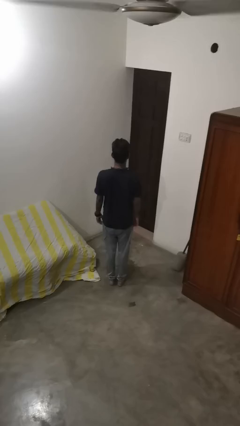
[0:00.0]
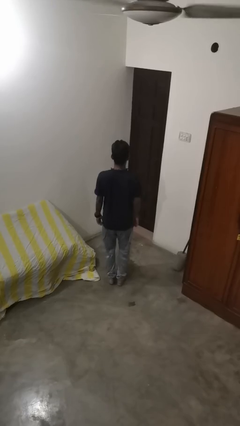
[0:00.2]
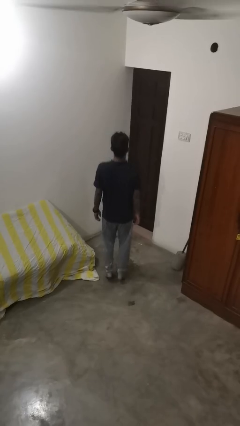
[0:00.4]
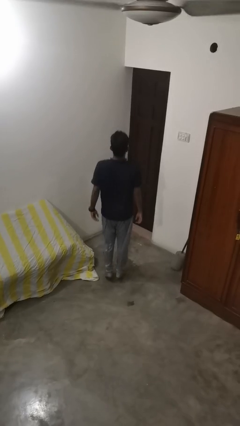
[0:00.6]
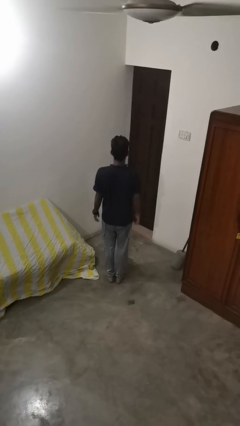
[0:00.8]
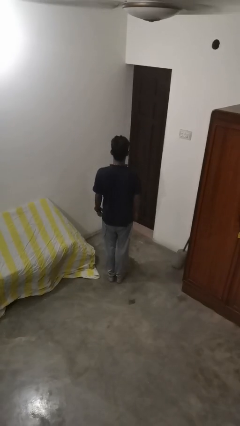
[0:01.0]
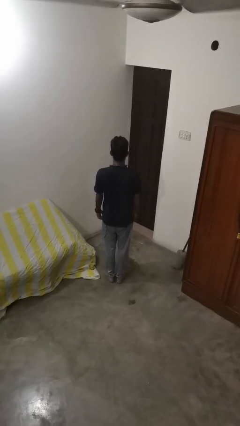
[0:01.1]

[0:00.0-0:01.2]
person jumps

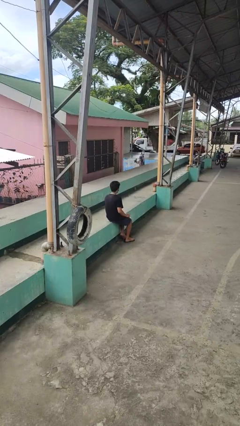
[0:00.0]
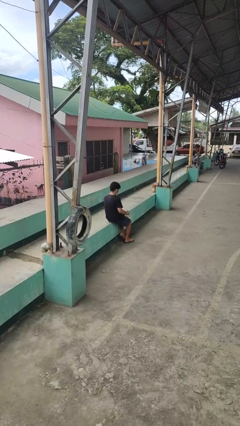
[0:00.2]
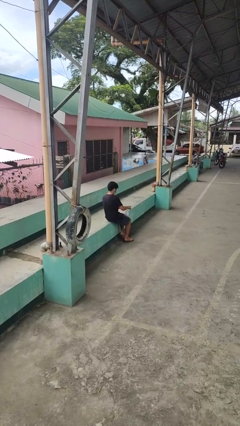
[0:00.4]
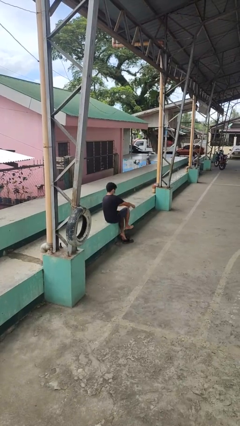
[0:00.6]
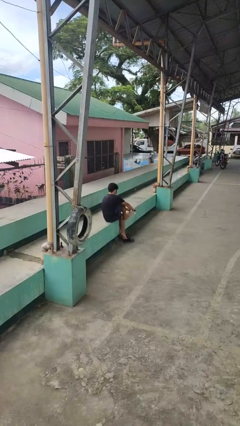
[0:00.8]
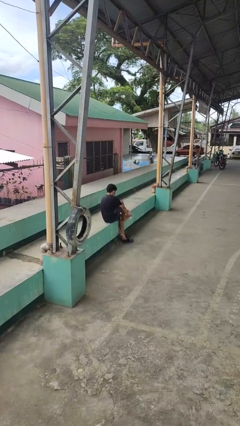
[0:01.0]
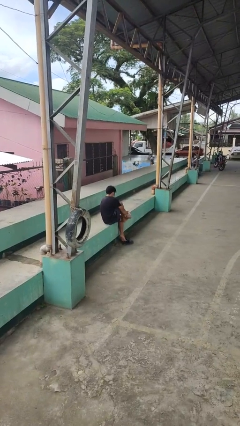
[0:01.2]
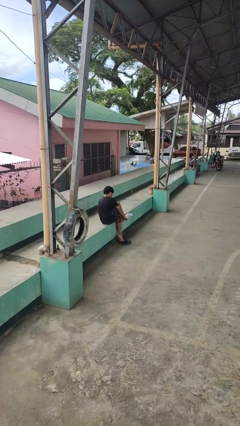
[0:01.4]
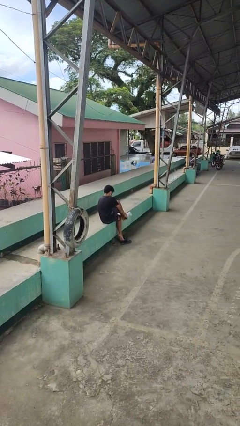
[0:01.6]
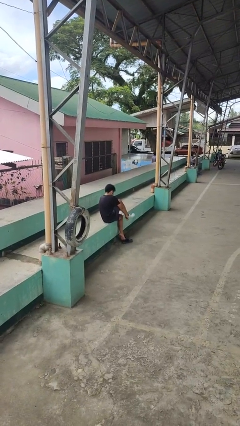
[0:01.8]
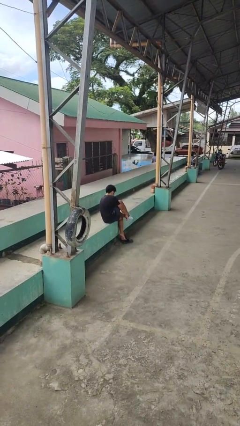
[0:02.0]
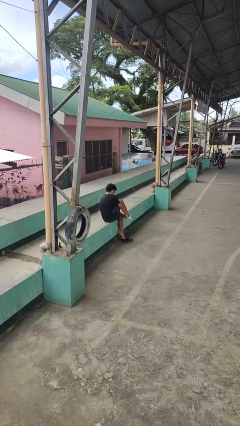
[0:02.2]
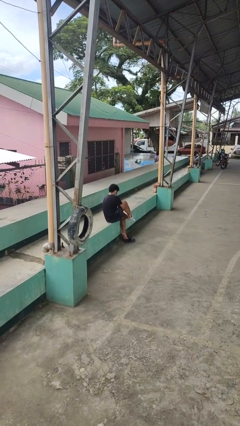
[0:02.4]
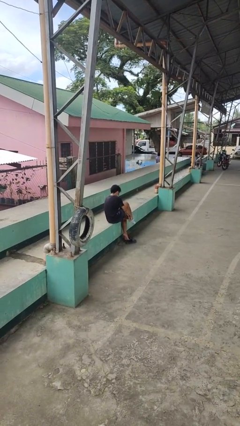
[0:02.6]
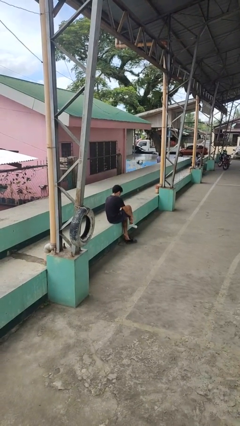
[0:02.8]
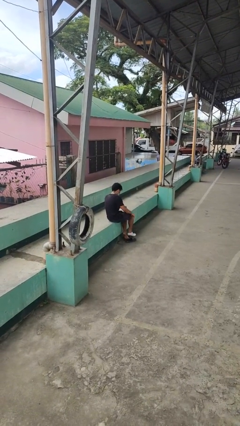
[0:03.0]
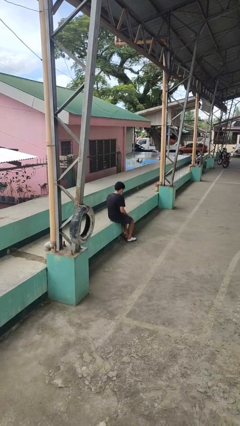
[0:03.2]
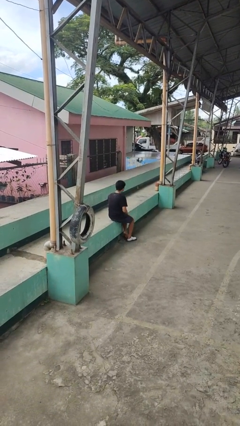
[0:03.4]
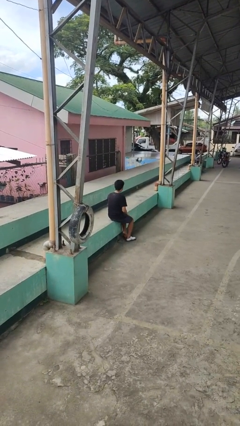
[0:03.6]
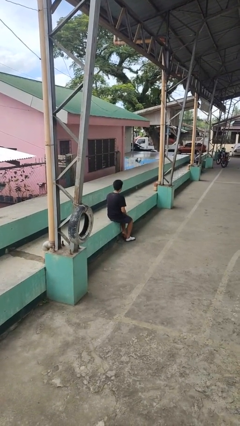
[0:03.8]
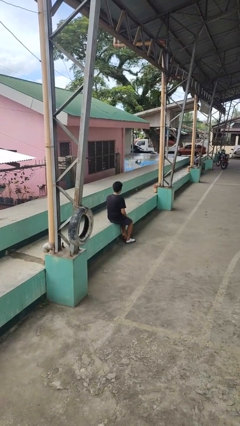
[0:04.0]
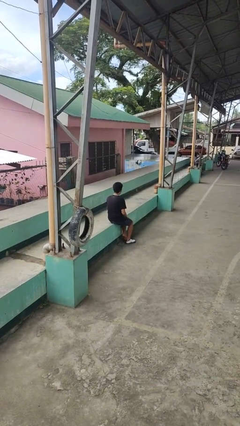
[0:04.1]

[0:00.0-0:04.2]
person puts on socks

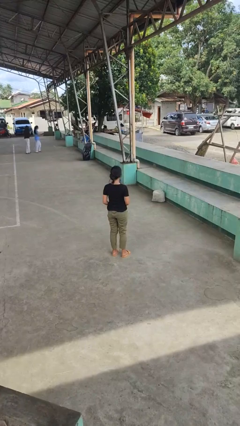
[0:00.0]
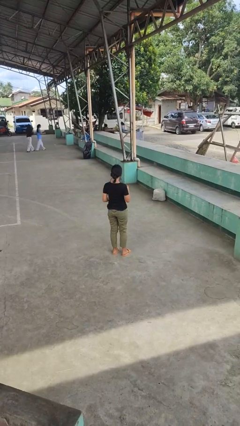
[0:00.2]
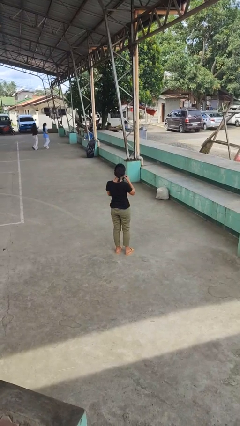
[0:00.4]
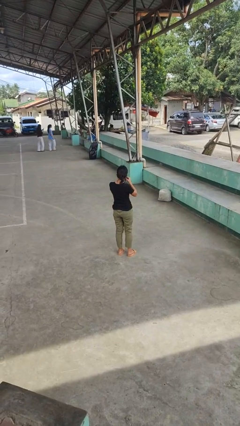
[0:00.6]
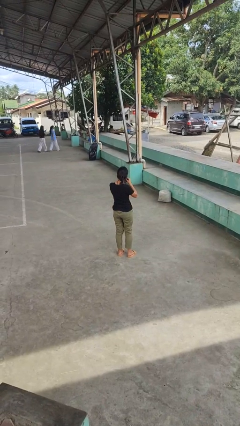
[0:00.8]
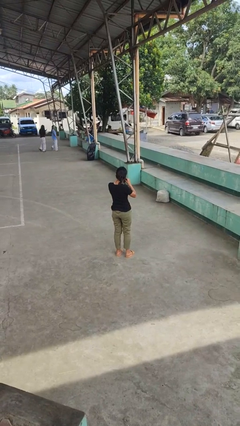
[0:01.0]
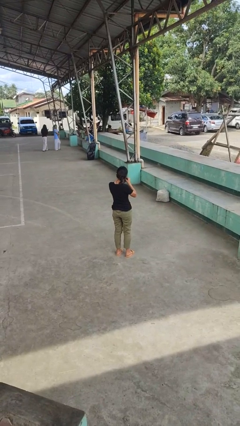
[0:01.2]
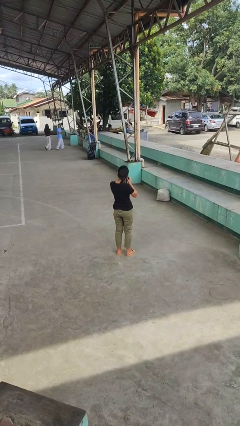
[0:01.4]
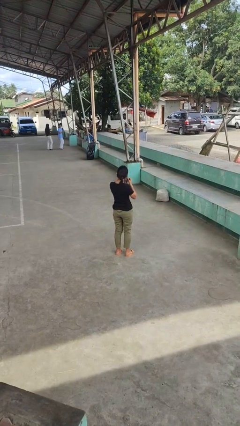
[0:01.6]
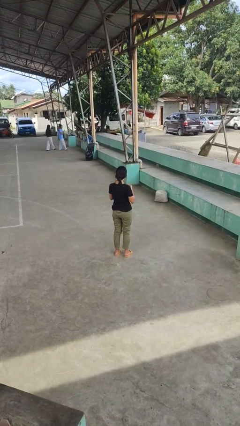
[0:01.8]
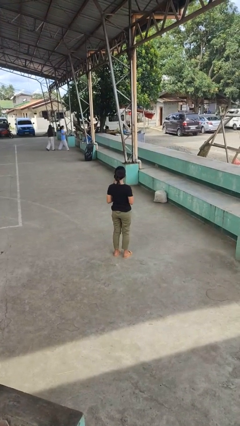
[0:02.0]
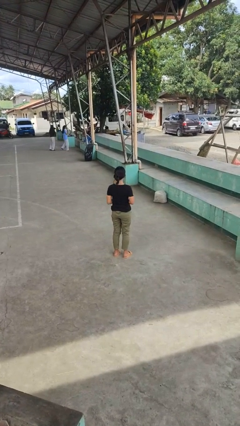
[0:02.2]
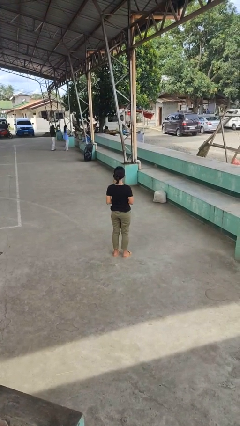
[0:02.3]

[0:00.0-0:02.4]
person takes off earrings

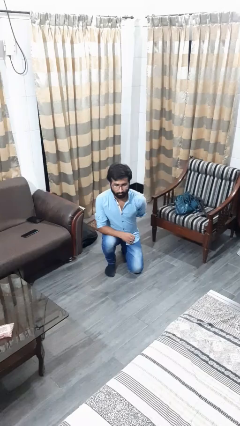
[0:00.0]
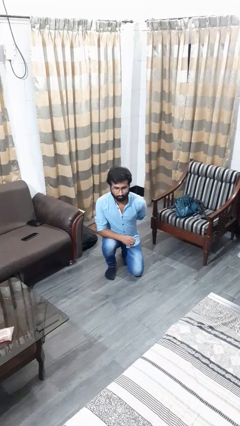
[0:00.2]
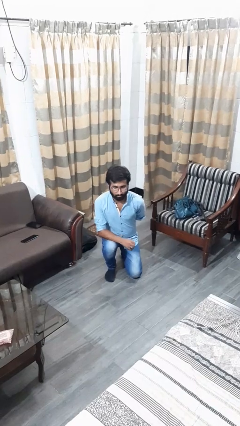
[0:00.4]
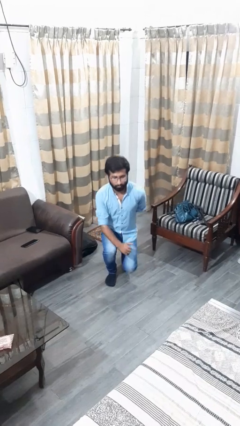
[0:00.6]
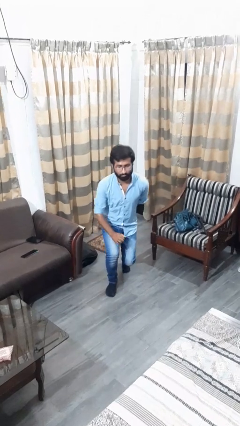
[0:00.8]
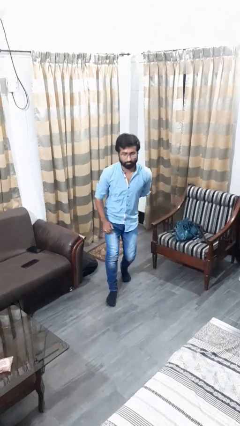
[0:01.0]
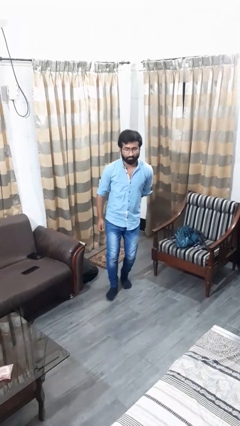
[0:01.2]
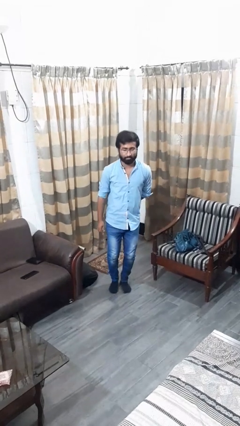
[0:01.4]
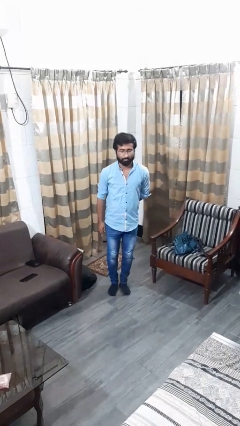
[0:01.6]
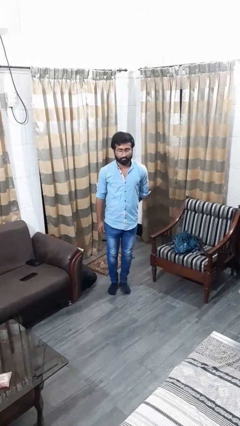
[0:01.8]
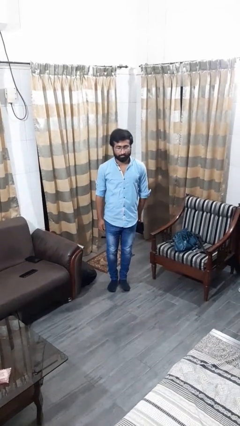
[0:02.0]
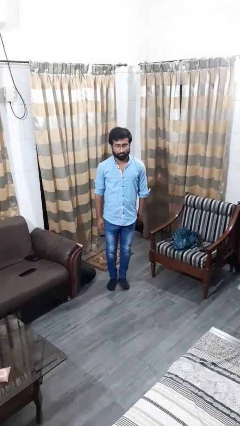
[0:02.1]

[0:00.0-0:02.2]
person stands up from floor

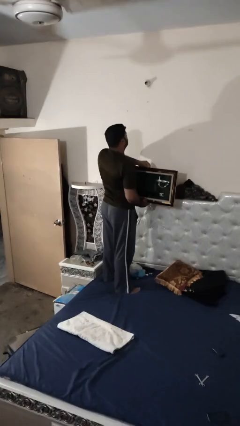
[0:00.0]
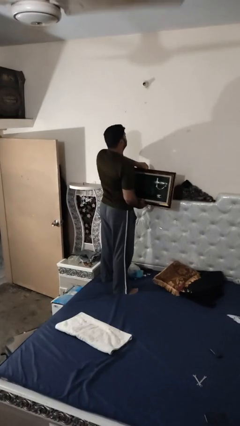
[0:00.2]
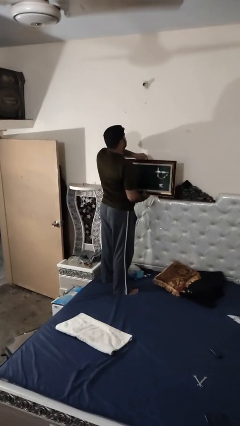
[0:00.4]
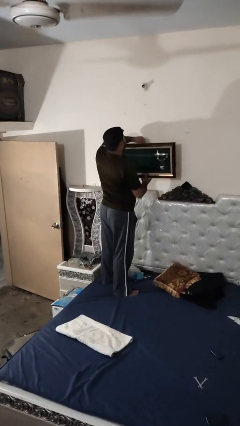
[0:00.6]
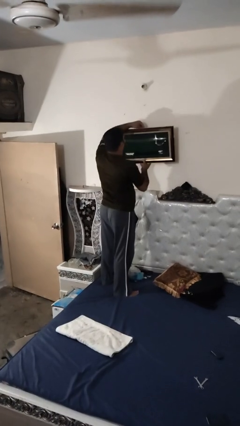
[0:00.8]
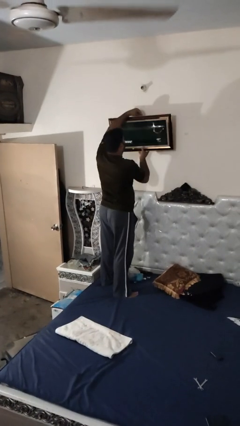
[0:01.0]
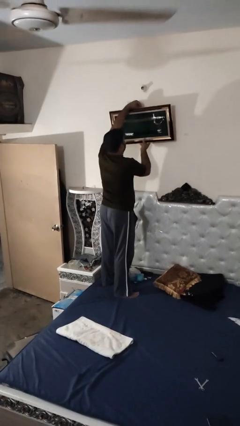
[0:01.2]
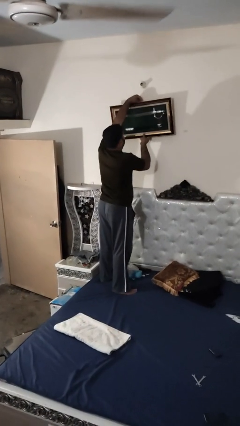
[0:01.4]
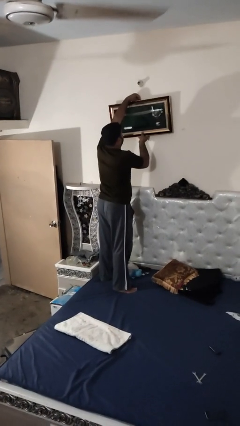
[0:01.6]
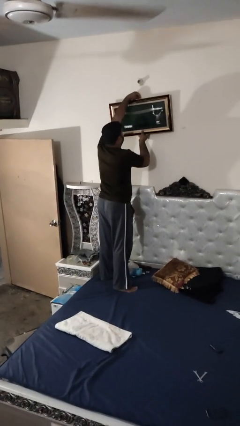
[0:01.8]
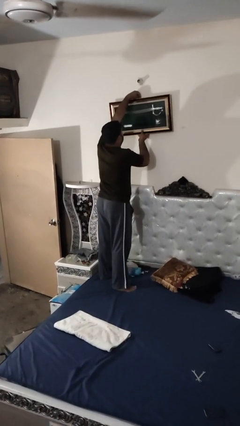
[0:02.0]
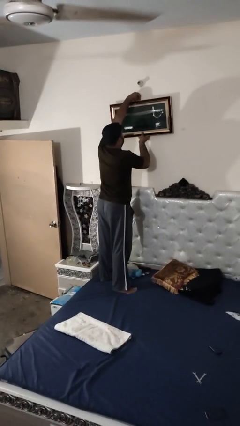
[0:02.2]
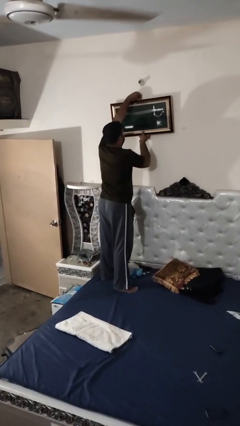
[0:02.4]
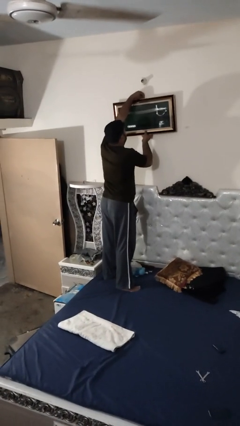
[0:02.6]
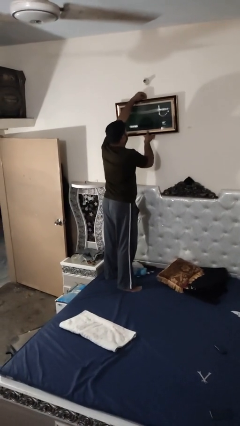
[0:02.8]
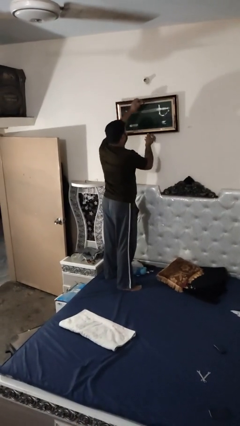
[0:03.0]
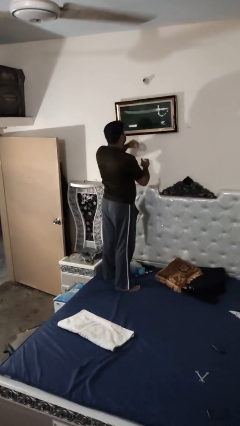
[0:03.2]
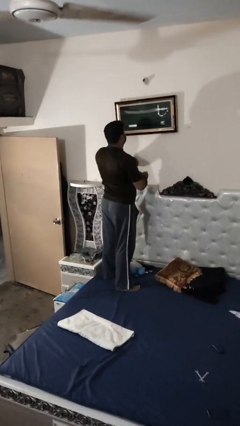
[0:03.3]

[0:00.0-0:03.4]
person puts up picture frame

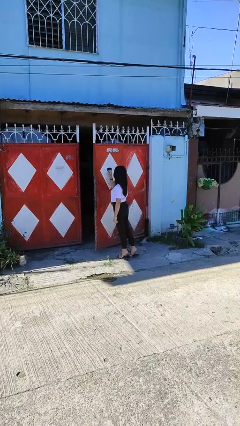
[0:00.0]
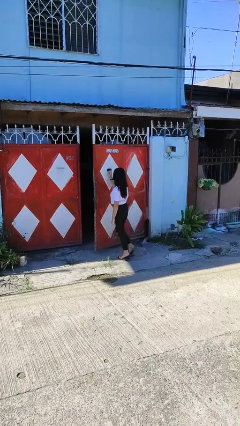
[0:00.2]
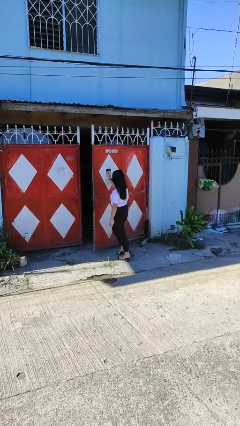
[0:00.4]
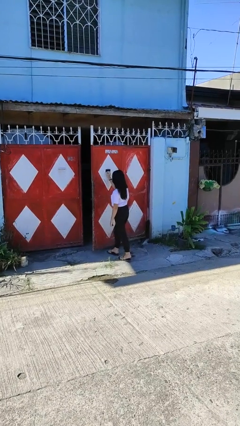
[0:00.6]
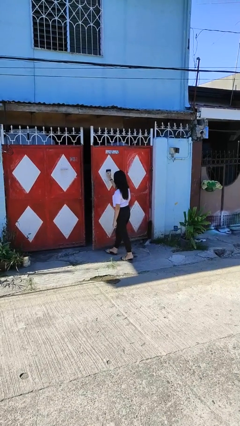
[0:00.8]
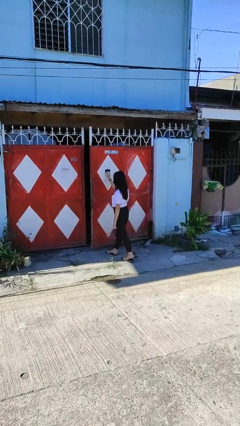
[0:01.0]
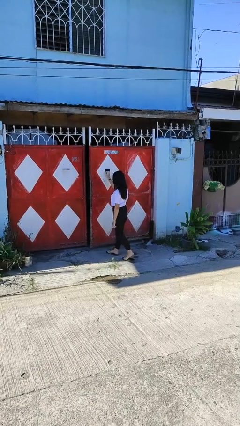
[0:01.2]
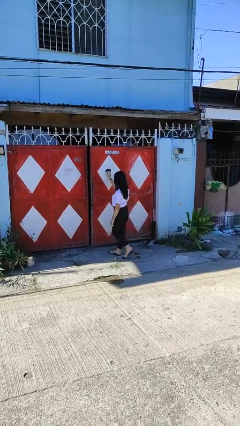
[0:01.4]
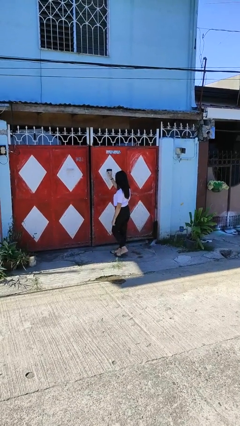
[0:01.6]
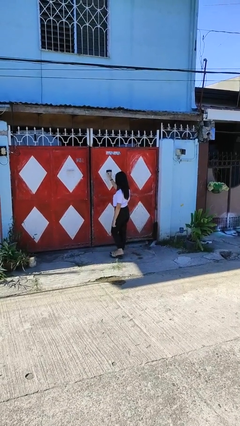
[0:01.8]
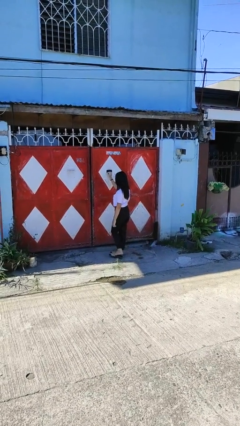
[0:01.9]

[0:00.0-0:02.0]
person closes gate

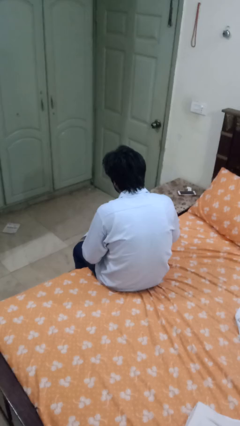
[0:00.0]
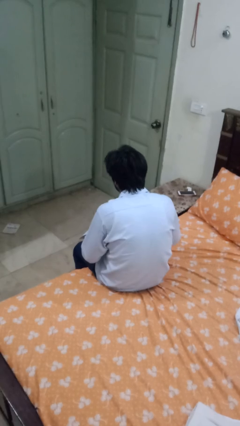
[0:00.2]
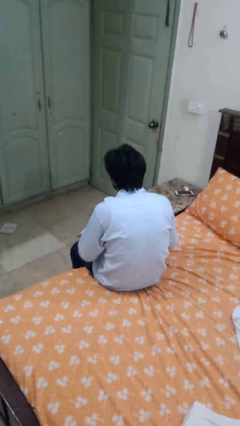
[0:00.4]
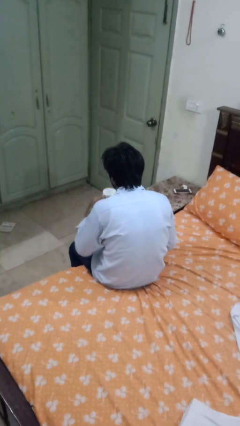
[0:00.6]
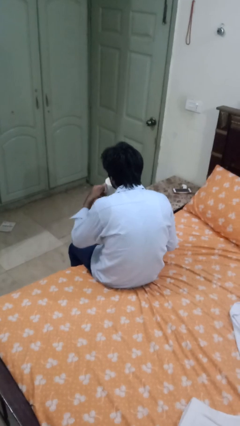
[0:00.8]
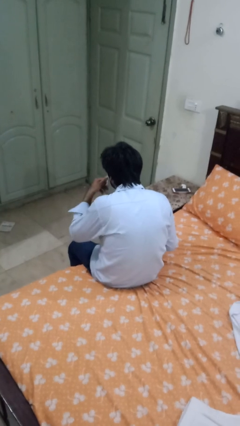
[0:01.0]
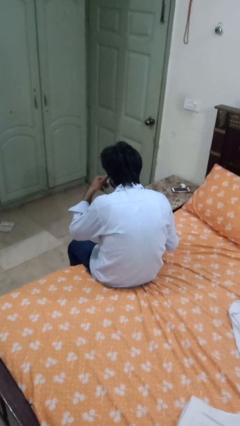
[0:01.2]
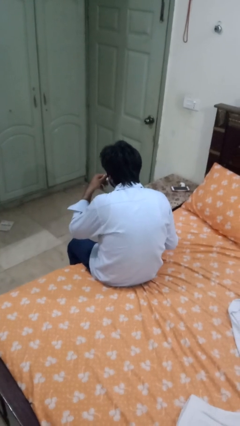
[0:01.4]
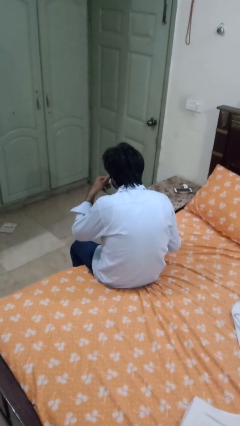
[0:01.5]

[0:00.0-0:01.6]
person drinks from mug
